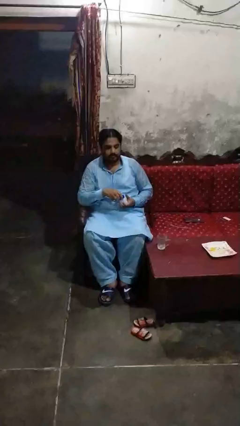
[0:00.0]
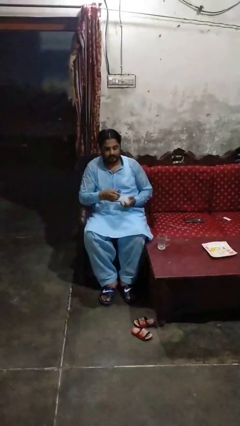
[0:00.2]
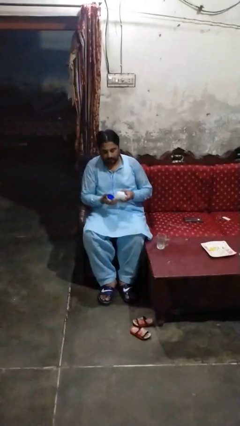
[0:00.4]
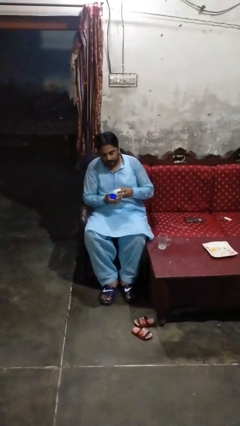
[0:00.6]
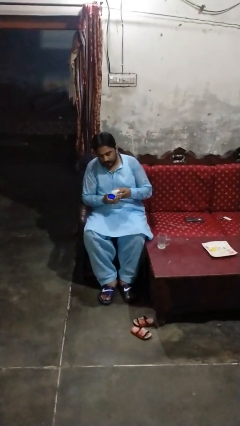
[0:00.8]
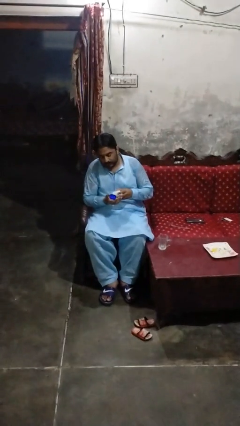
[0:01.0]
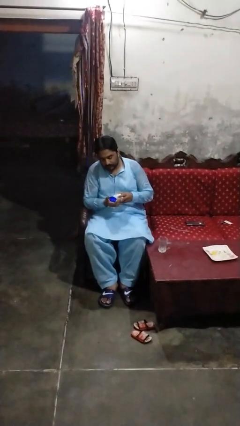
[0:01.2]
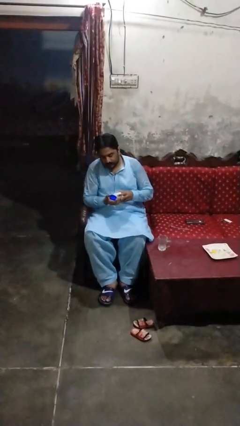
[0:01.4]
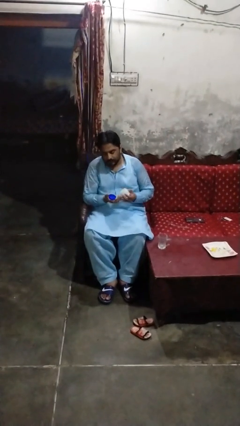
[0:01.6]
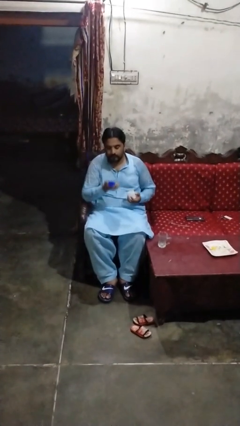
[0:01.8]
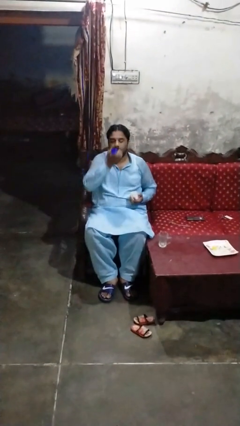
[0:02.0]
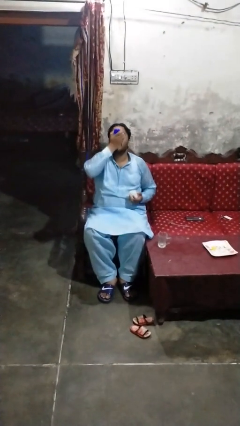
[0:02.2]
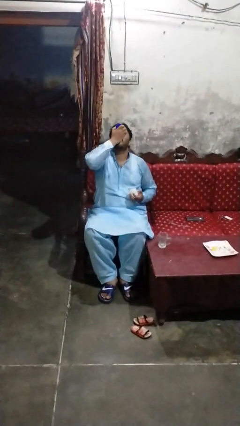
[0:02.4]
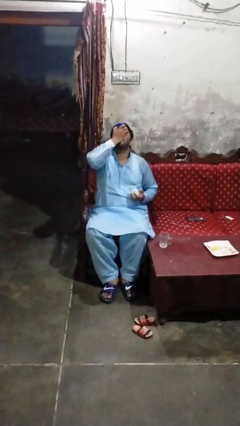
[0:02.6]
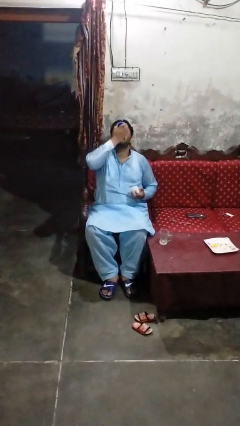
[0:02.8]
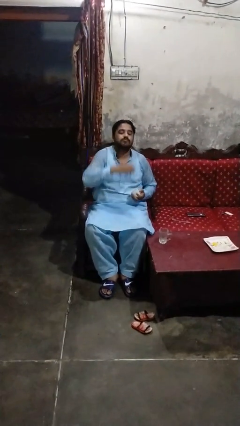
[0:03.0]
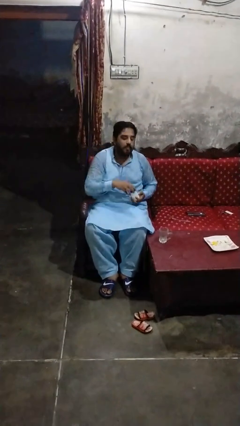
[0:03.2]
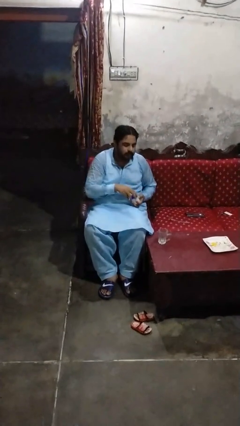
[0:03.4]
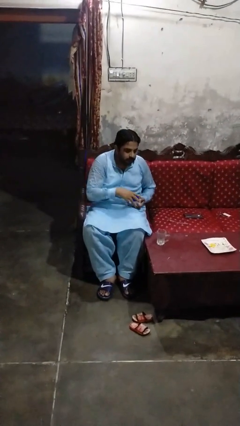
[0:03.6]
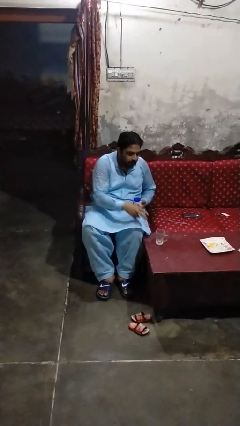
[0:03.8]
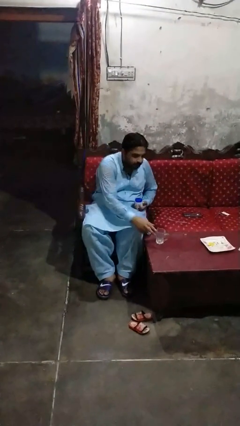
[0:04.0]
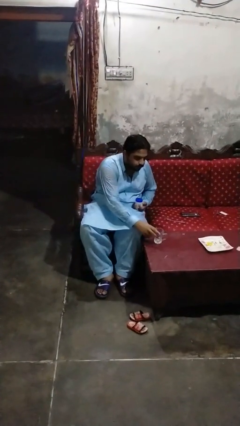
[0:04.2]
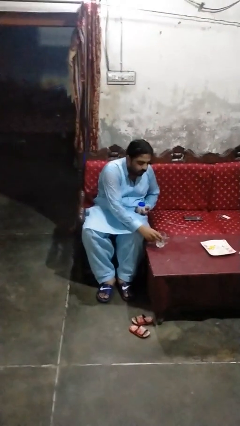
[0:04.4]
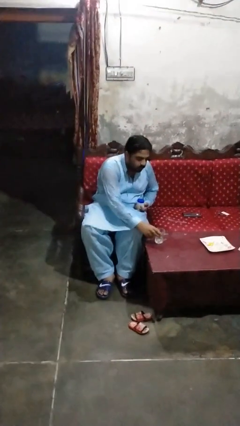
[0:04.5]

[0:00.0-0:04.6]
person takes medicine pills

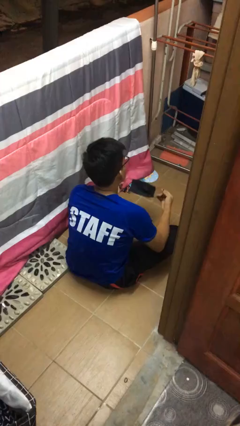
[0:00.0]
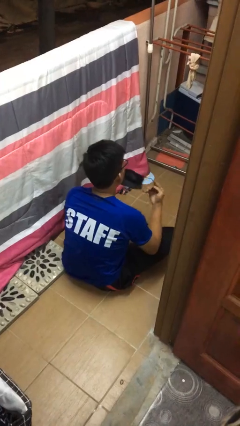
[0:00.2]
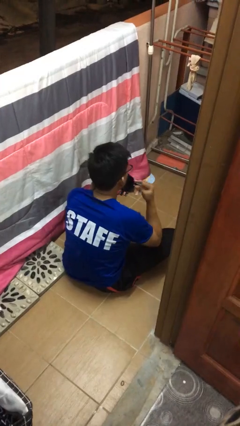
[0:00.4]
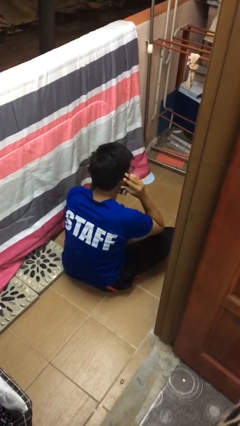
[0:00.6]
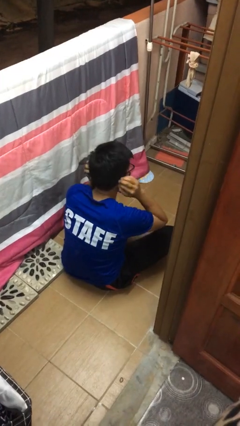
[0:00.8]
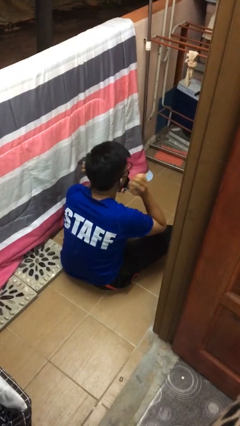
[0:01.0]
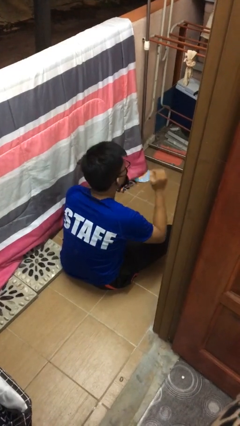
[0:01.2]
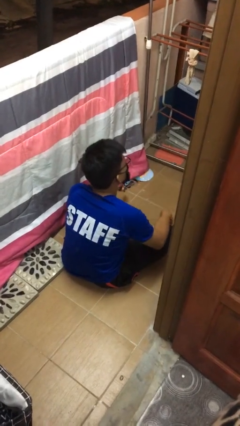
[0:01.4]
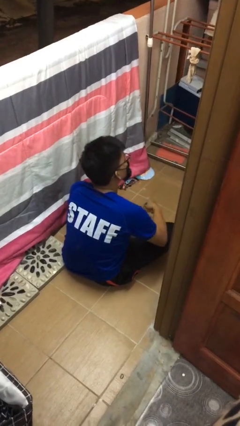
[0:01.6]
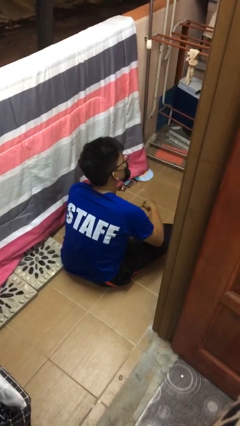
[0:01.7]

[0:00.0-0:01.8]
person puts on facemask

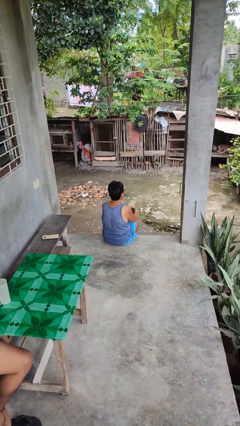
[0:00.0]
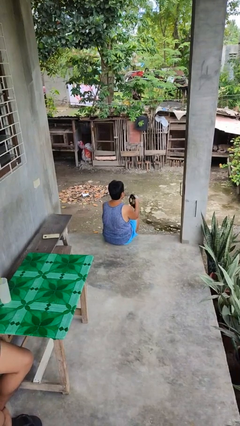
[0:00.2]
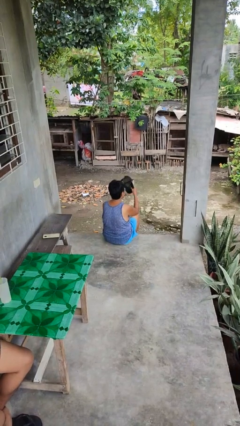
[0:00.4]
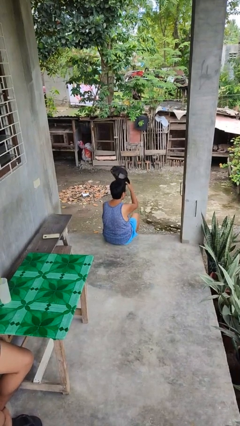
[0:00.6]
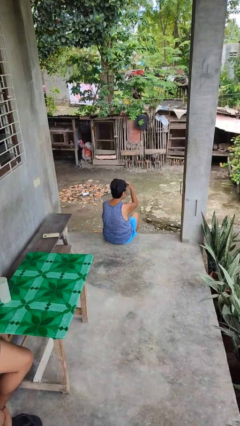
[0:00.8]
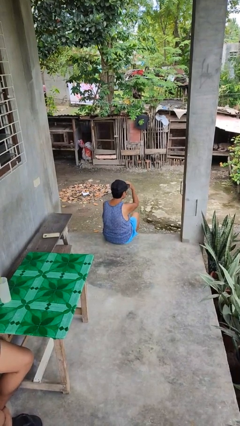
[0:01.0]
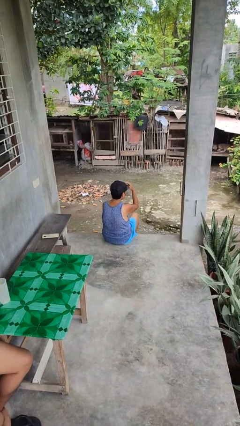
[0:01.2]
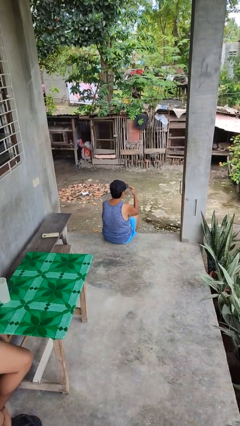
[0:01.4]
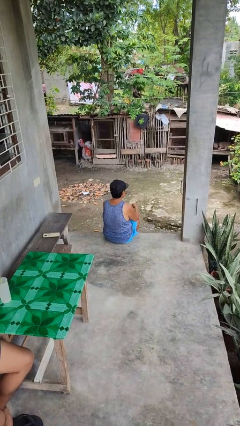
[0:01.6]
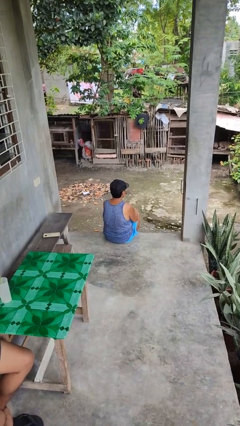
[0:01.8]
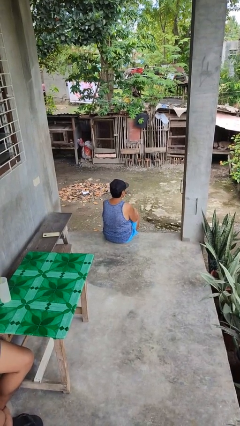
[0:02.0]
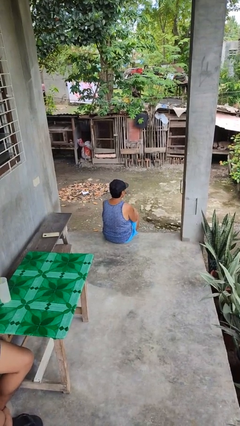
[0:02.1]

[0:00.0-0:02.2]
person puts on hat

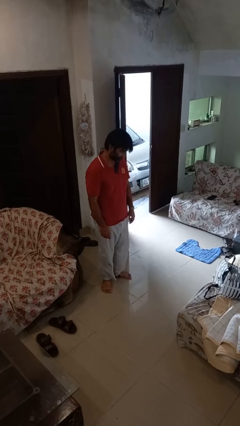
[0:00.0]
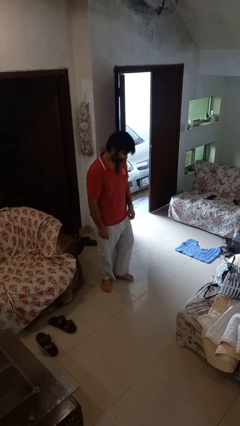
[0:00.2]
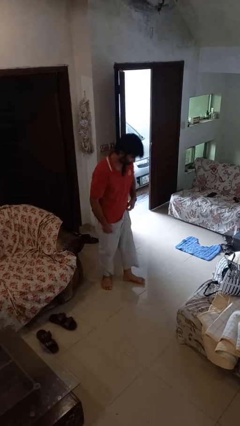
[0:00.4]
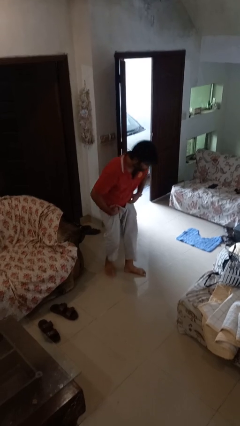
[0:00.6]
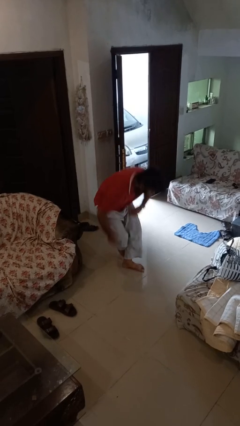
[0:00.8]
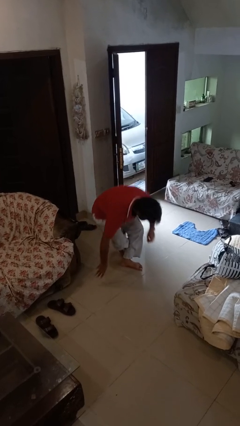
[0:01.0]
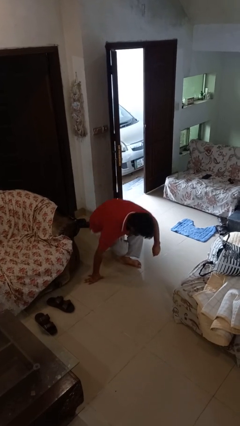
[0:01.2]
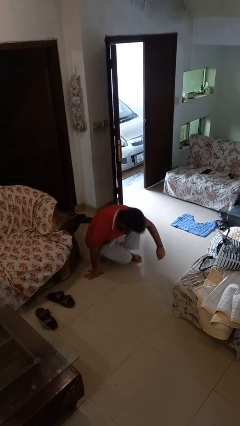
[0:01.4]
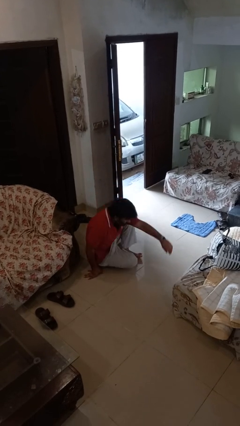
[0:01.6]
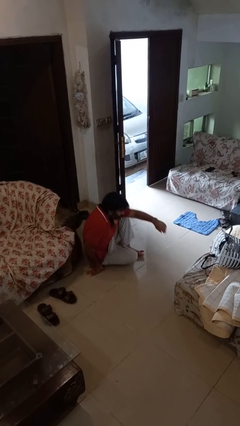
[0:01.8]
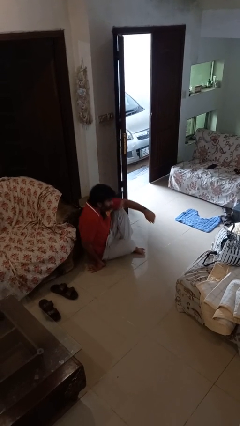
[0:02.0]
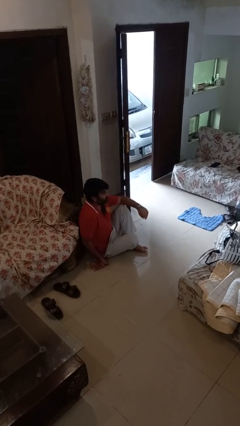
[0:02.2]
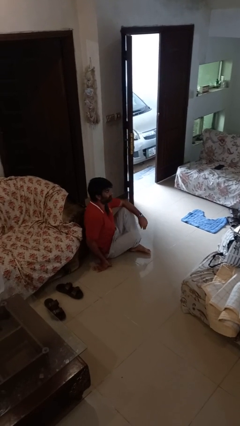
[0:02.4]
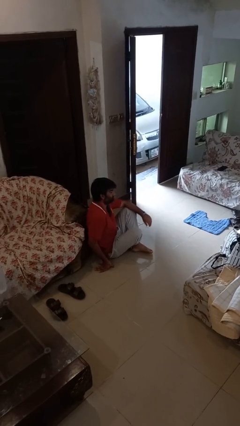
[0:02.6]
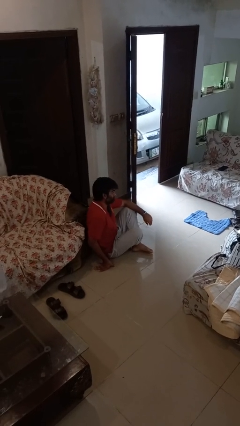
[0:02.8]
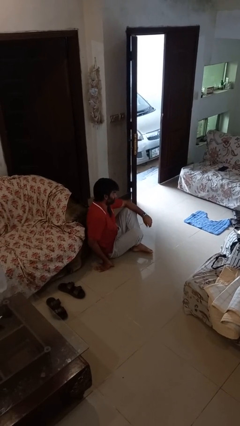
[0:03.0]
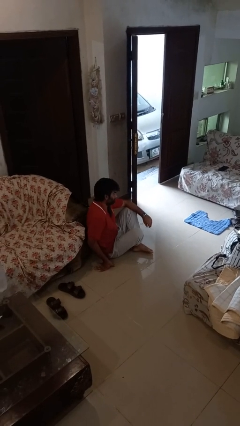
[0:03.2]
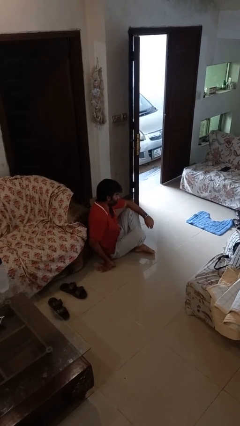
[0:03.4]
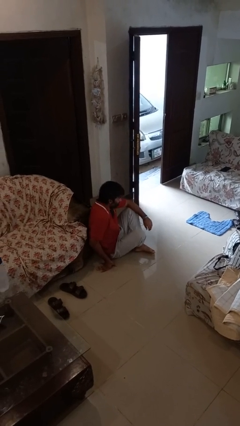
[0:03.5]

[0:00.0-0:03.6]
person sits crisscross

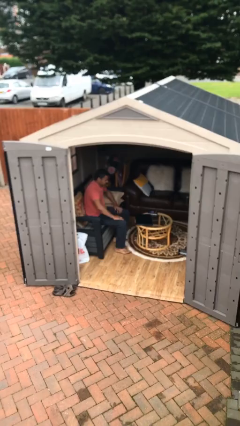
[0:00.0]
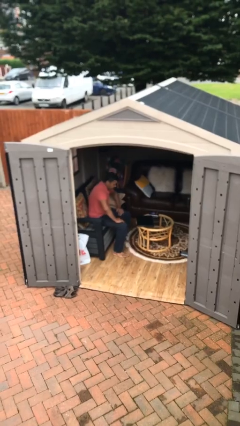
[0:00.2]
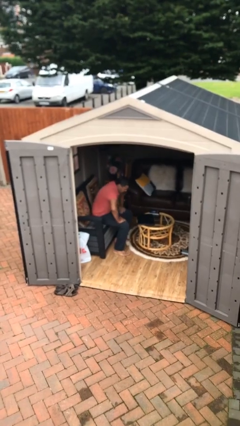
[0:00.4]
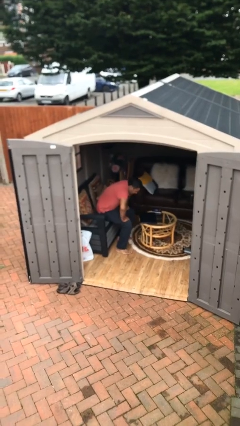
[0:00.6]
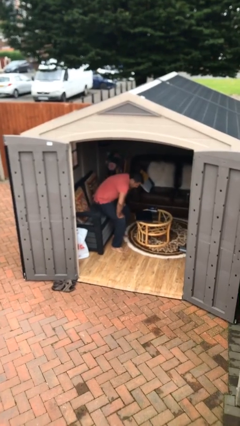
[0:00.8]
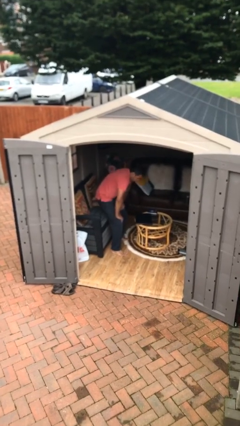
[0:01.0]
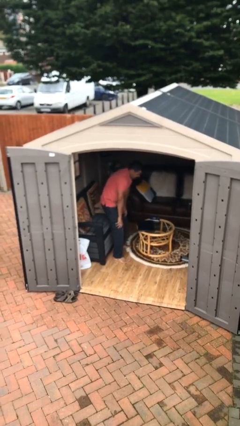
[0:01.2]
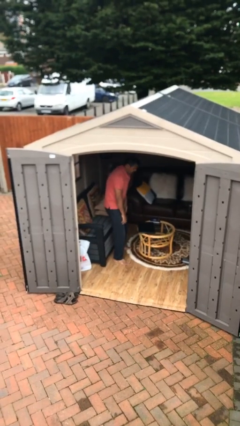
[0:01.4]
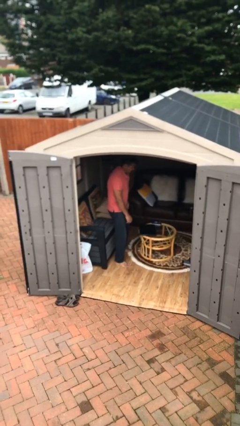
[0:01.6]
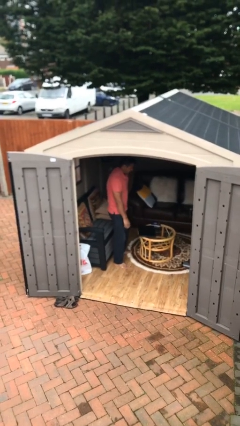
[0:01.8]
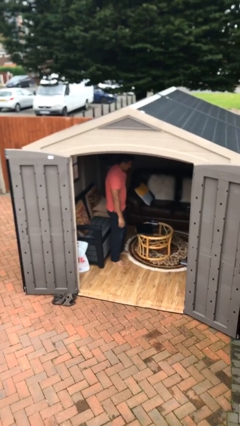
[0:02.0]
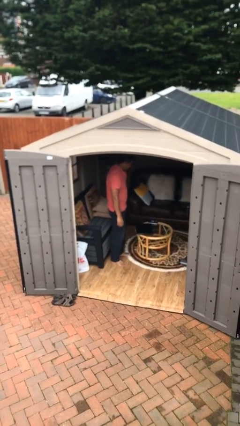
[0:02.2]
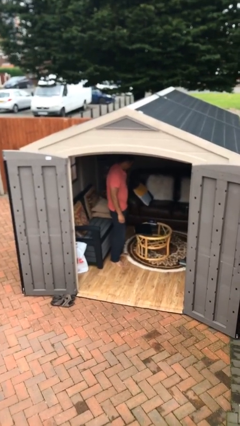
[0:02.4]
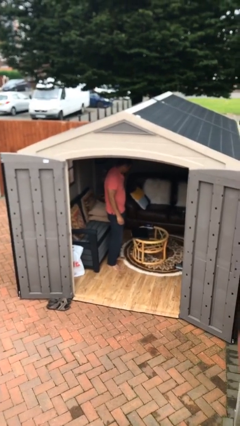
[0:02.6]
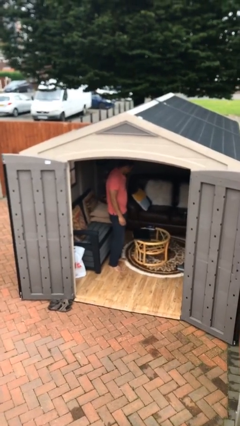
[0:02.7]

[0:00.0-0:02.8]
person stands up

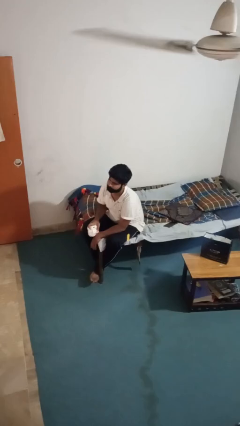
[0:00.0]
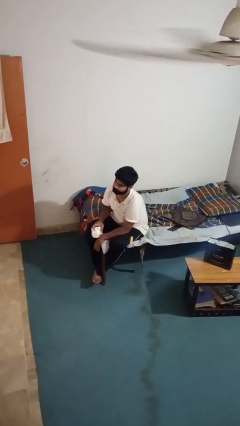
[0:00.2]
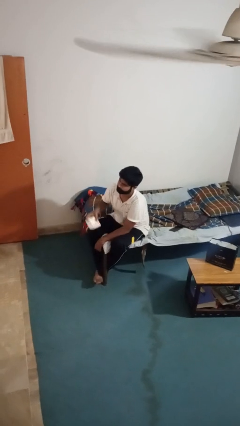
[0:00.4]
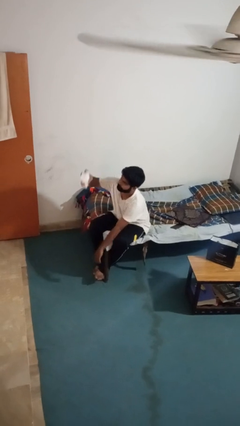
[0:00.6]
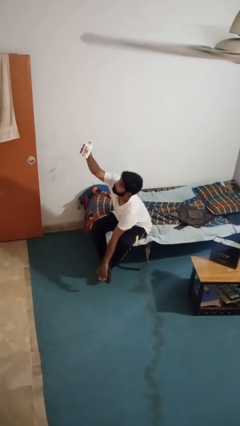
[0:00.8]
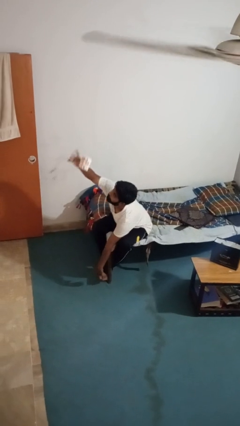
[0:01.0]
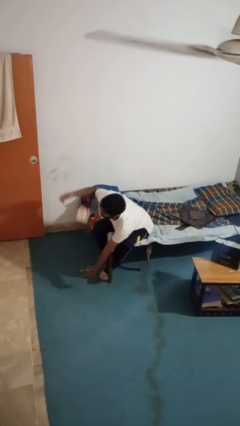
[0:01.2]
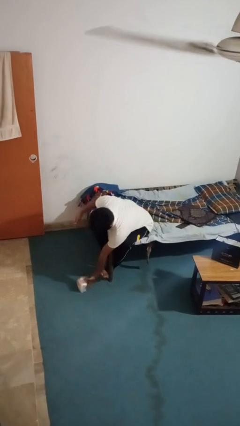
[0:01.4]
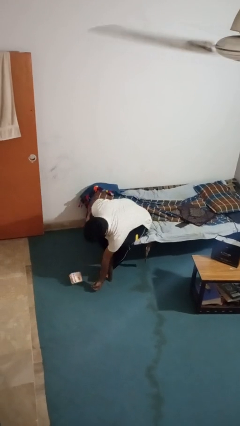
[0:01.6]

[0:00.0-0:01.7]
person drops object

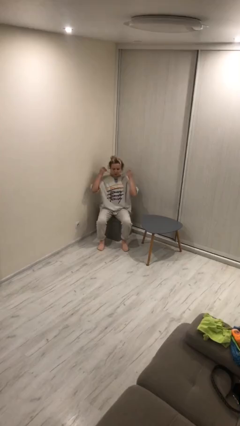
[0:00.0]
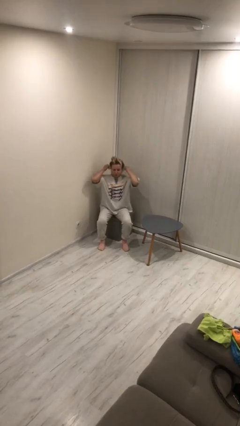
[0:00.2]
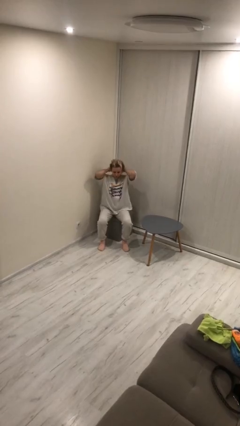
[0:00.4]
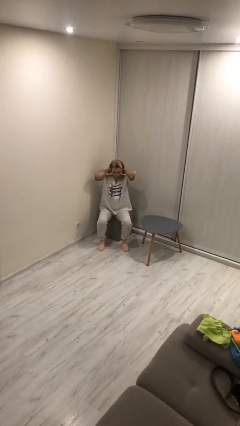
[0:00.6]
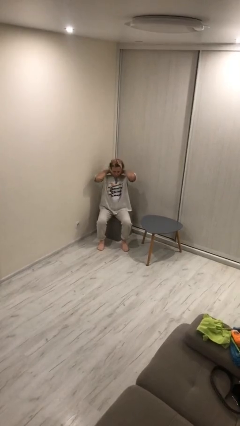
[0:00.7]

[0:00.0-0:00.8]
person puts on necklace

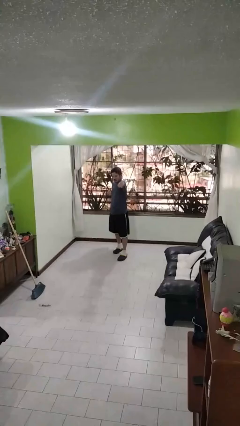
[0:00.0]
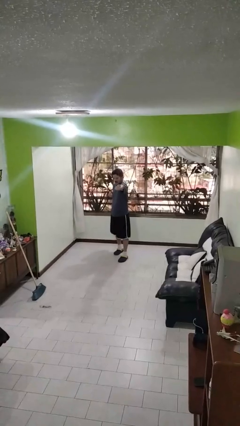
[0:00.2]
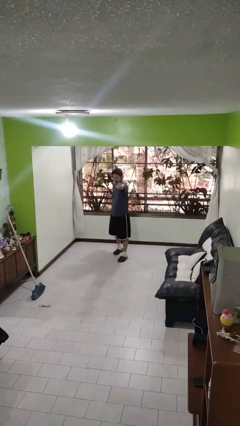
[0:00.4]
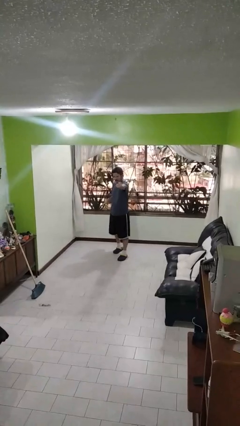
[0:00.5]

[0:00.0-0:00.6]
person punches
